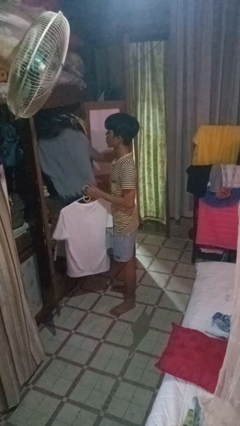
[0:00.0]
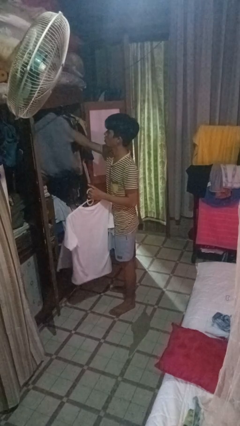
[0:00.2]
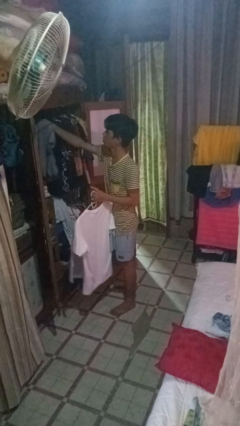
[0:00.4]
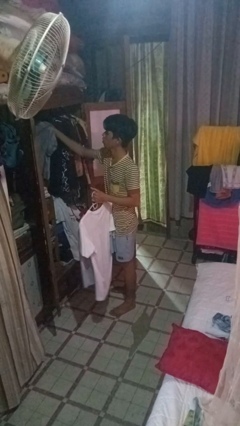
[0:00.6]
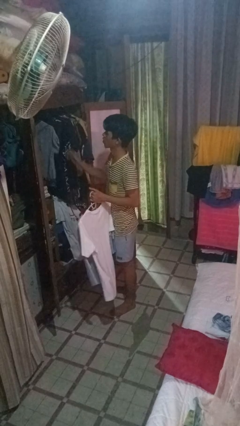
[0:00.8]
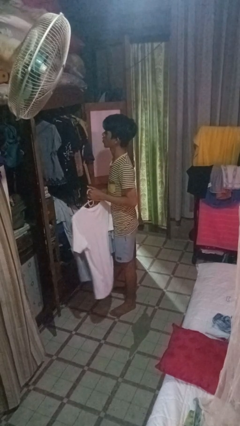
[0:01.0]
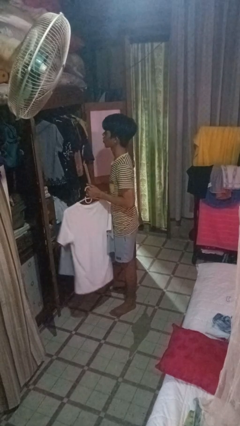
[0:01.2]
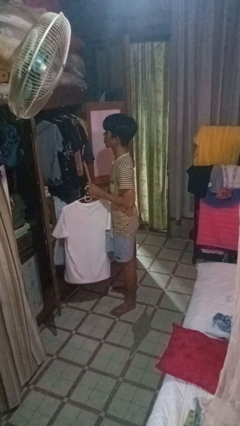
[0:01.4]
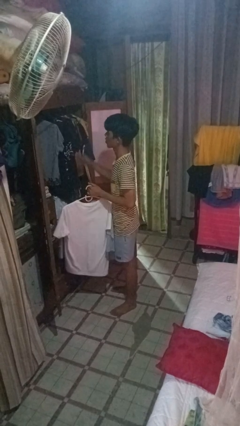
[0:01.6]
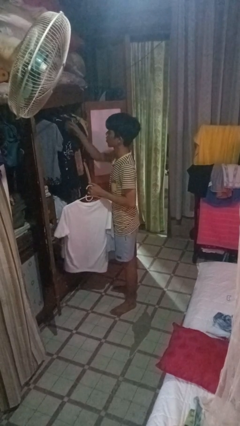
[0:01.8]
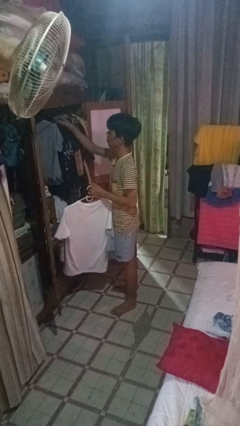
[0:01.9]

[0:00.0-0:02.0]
person puts clothes into closet

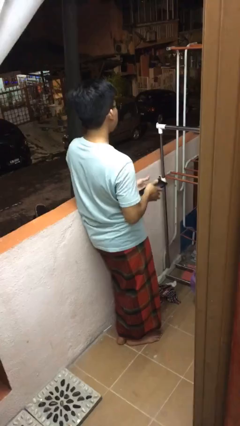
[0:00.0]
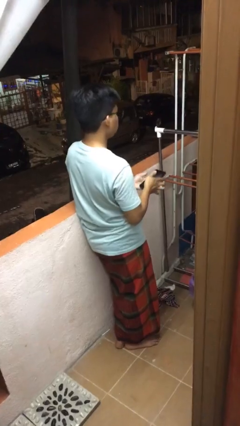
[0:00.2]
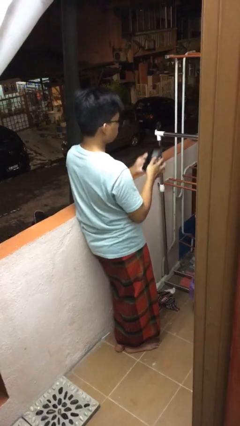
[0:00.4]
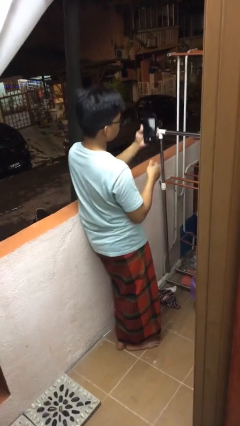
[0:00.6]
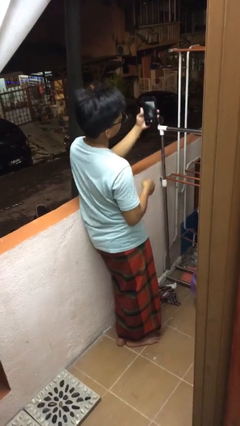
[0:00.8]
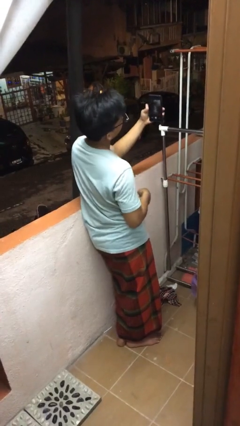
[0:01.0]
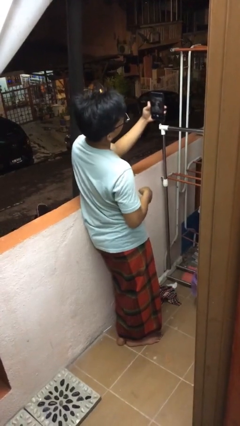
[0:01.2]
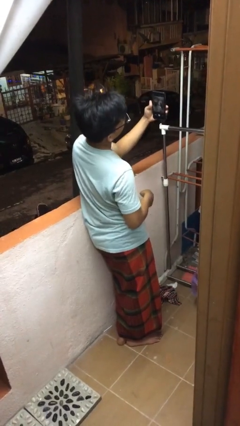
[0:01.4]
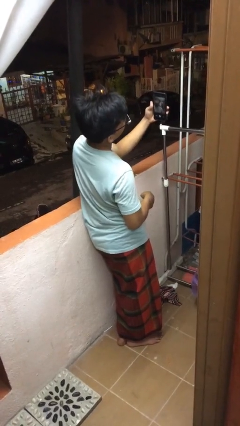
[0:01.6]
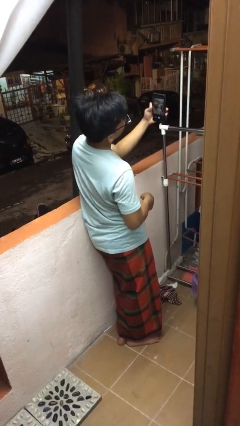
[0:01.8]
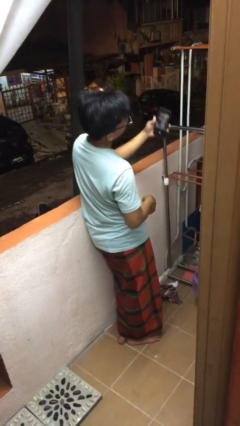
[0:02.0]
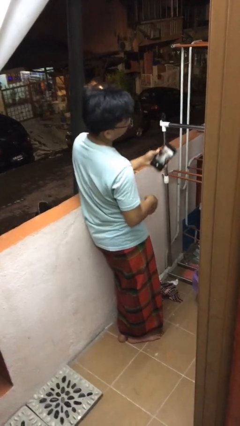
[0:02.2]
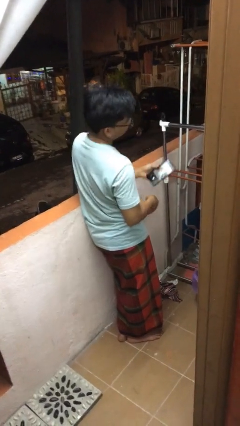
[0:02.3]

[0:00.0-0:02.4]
person takes selfie

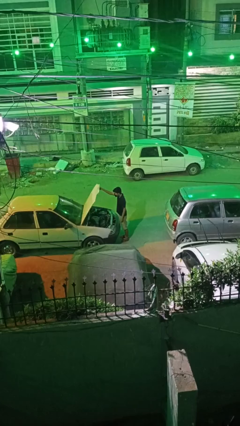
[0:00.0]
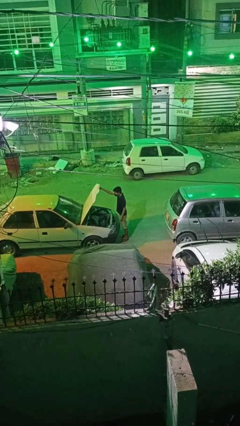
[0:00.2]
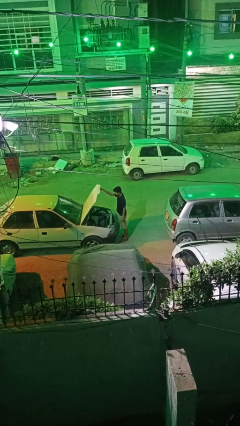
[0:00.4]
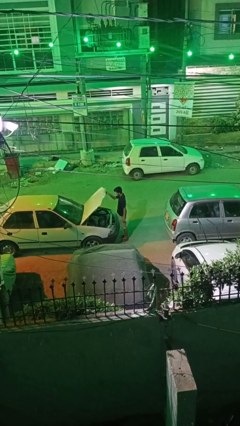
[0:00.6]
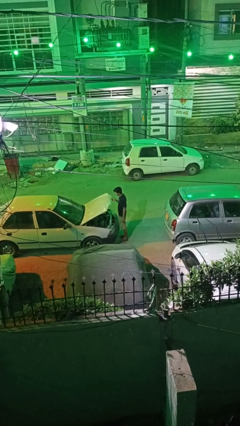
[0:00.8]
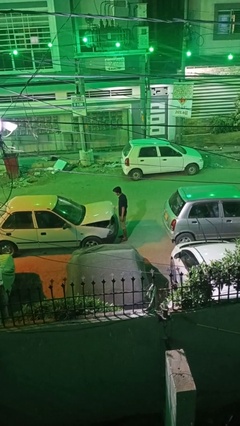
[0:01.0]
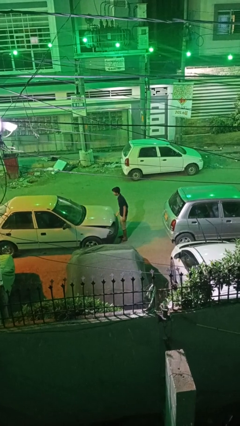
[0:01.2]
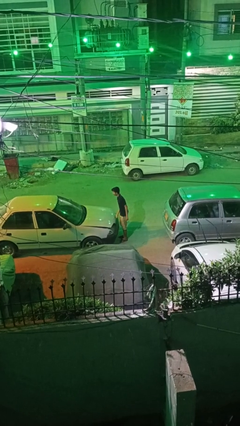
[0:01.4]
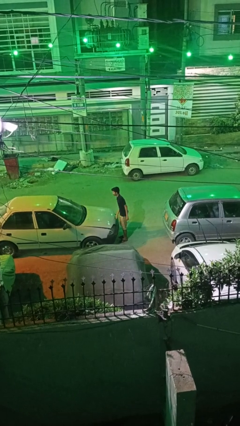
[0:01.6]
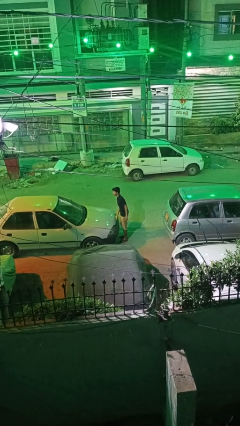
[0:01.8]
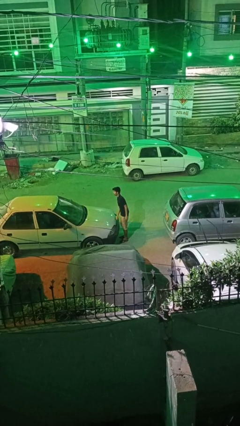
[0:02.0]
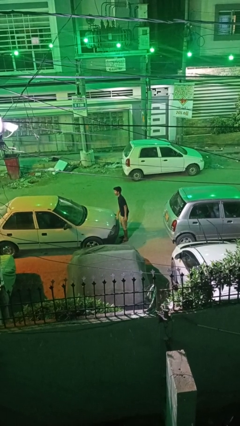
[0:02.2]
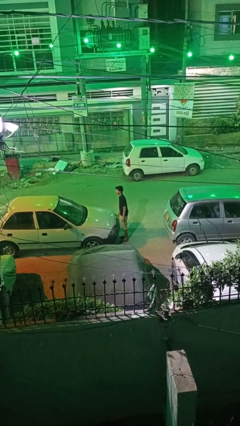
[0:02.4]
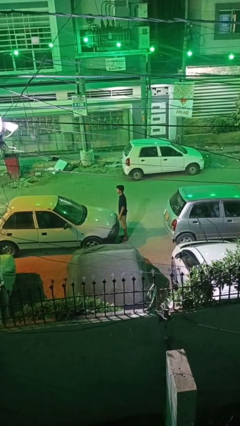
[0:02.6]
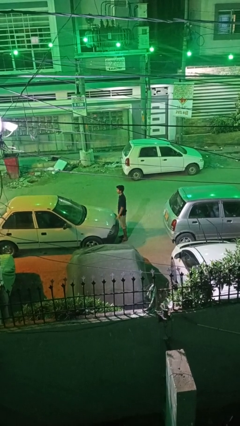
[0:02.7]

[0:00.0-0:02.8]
person closes car hood

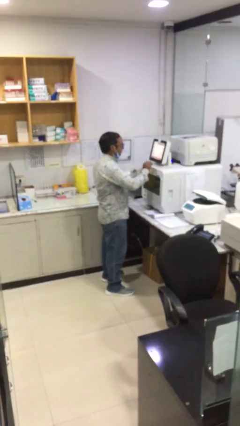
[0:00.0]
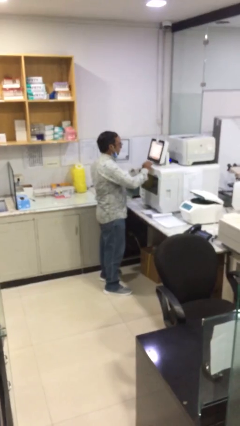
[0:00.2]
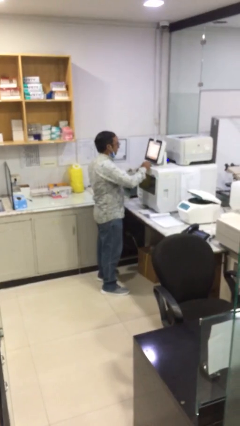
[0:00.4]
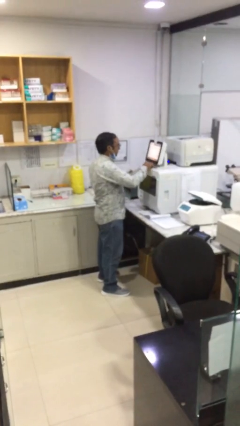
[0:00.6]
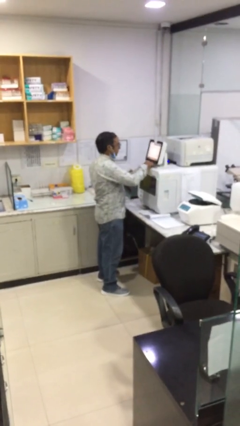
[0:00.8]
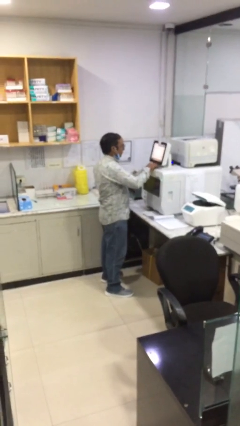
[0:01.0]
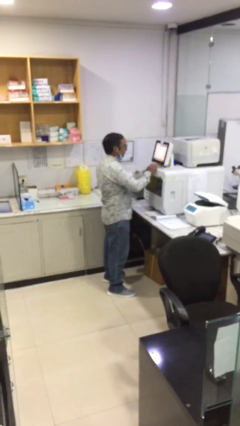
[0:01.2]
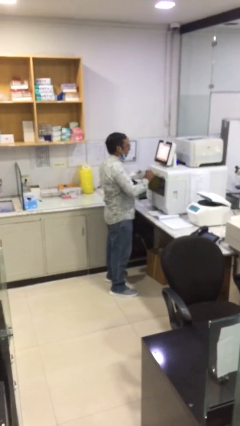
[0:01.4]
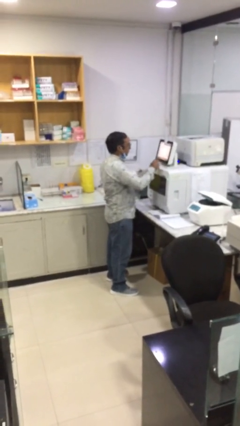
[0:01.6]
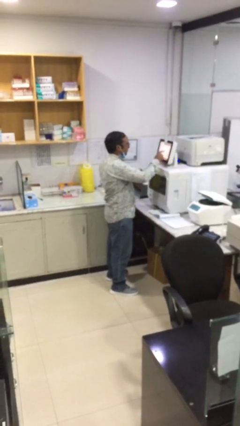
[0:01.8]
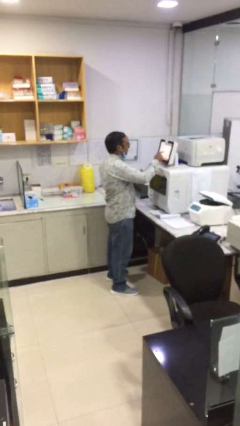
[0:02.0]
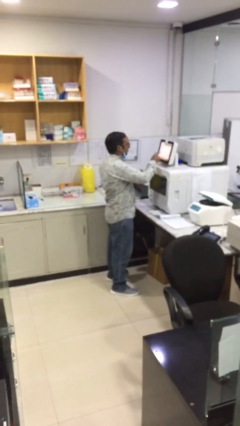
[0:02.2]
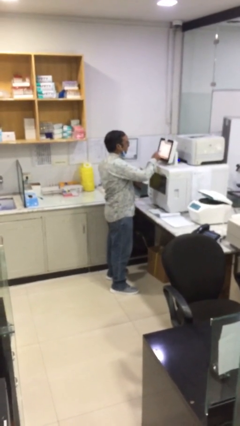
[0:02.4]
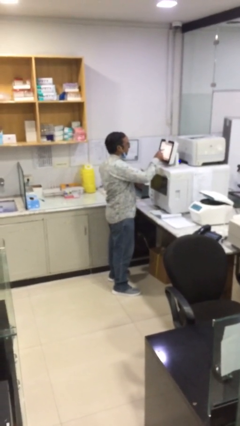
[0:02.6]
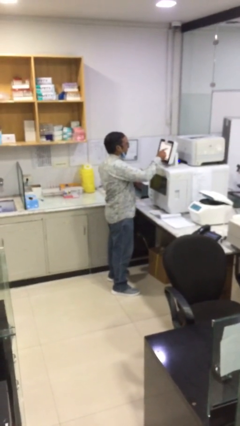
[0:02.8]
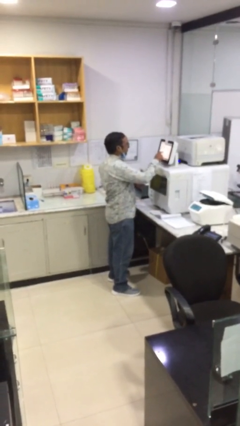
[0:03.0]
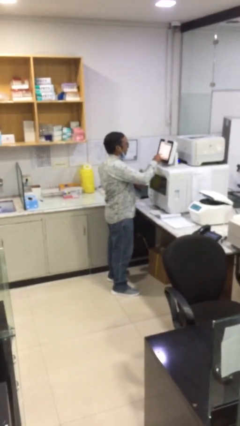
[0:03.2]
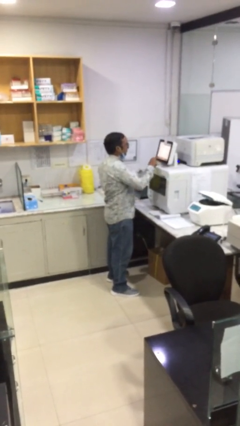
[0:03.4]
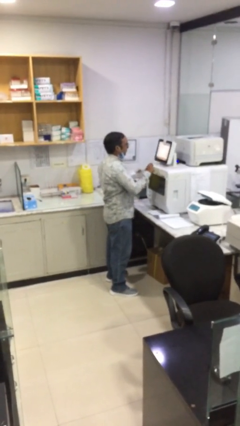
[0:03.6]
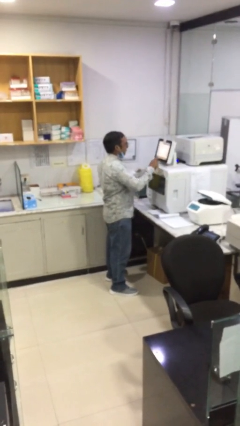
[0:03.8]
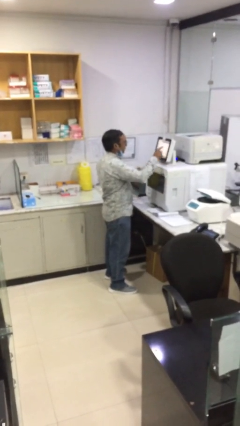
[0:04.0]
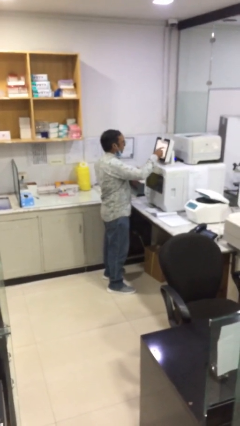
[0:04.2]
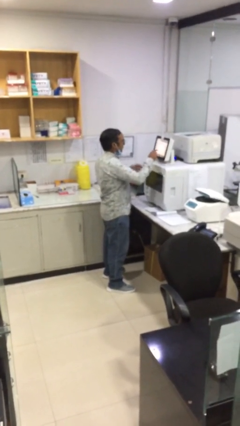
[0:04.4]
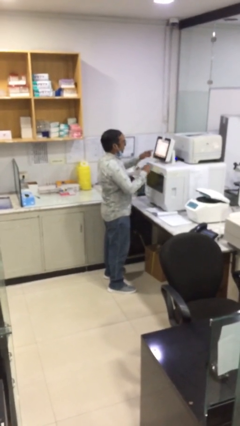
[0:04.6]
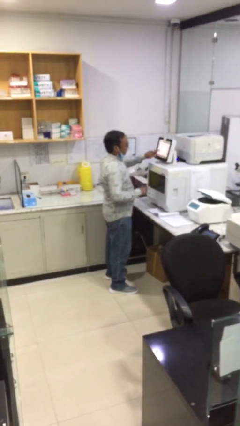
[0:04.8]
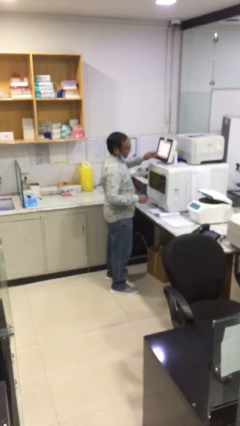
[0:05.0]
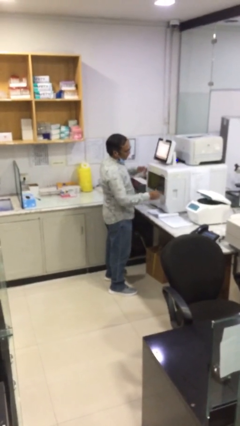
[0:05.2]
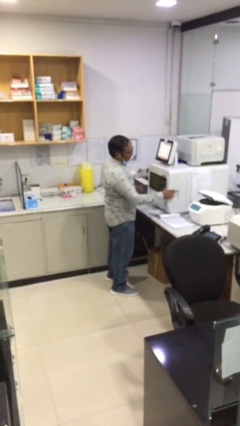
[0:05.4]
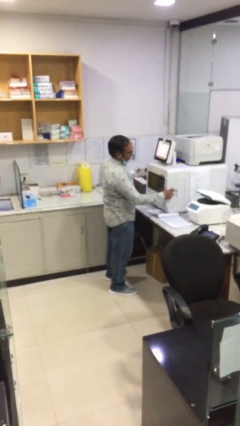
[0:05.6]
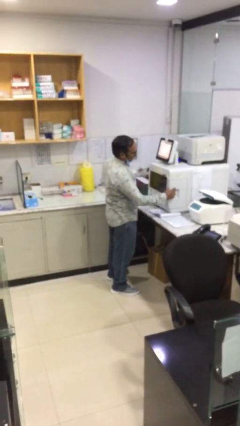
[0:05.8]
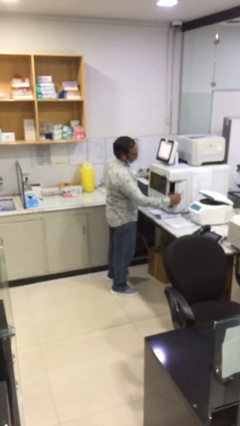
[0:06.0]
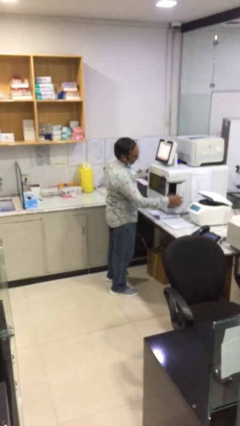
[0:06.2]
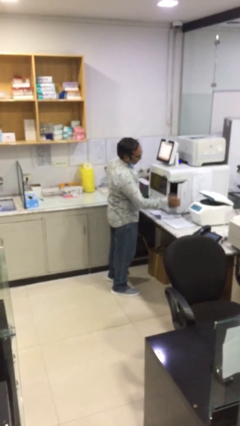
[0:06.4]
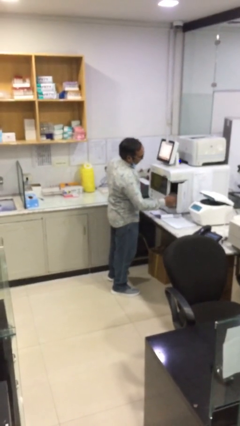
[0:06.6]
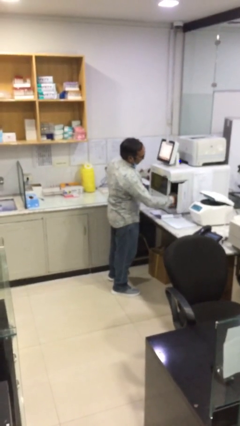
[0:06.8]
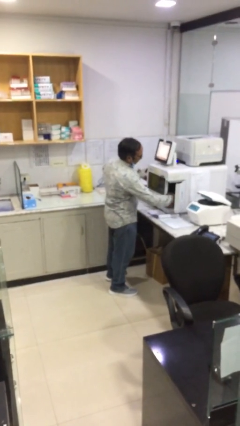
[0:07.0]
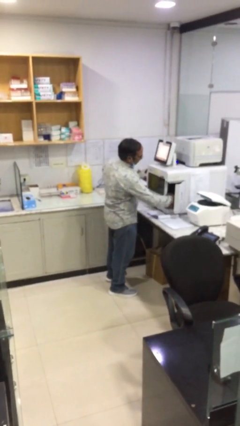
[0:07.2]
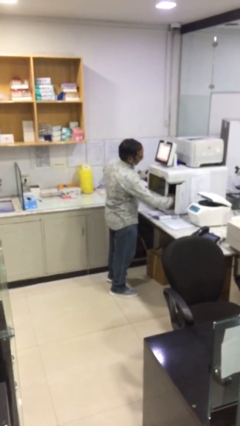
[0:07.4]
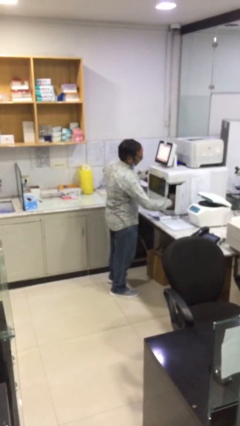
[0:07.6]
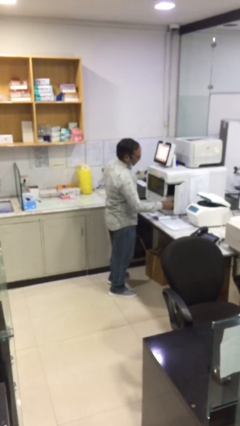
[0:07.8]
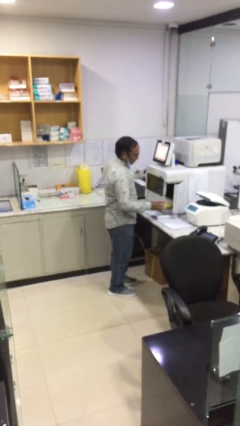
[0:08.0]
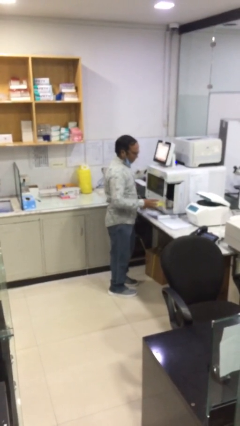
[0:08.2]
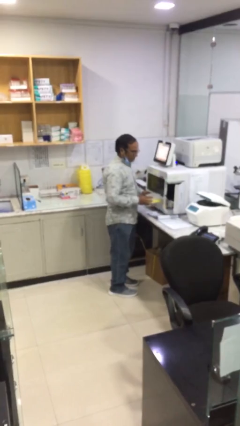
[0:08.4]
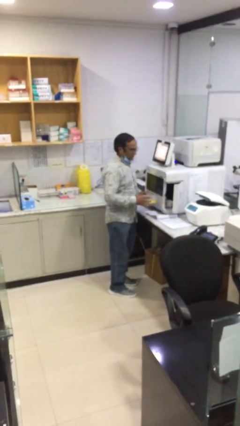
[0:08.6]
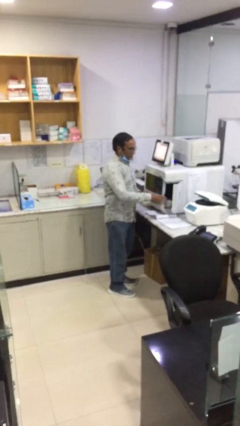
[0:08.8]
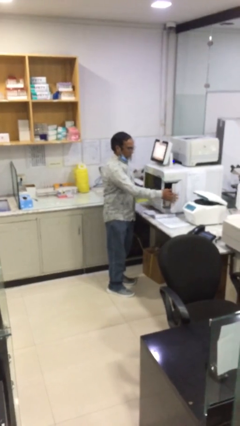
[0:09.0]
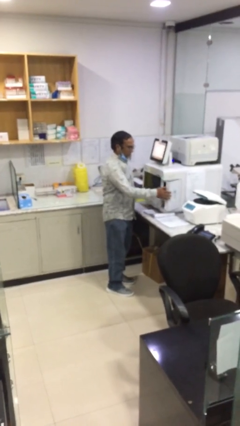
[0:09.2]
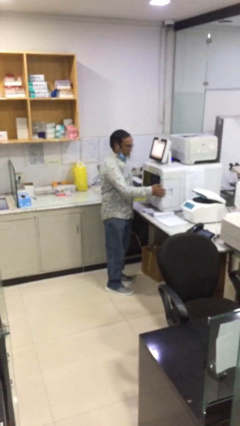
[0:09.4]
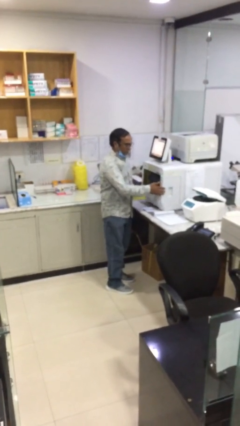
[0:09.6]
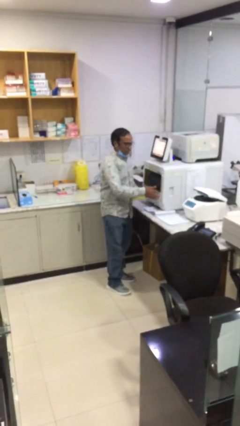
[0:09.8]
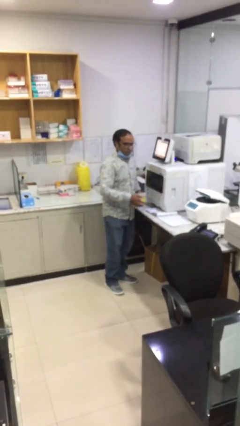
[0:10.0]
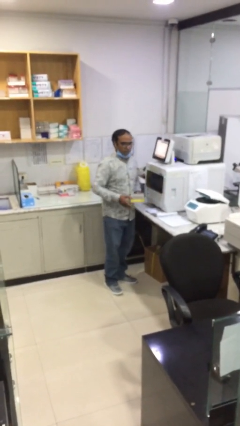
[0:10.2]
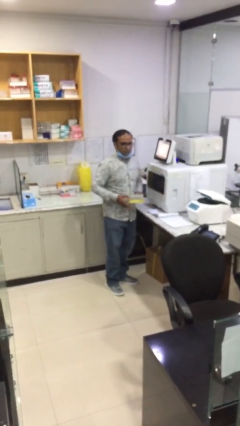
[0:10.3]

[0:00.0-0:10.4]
person purchases from machine
